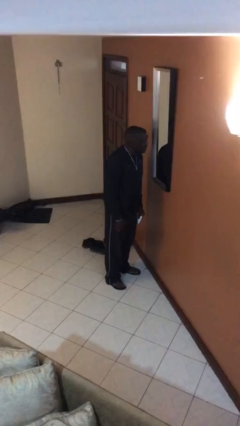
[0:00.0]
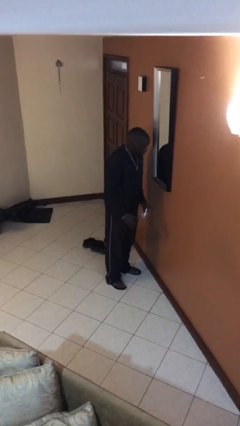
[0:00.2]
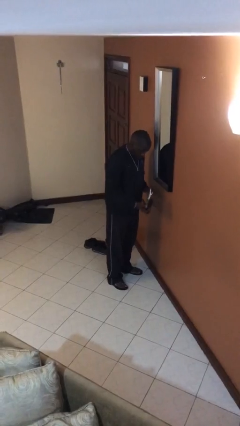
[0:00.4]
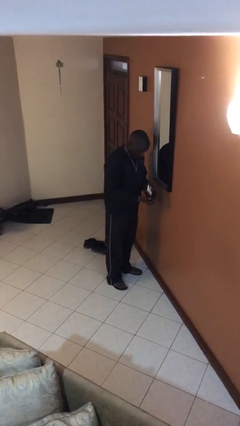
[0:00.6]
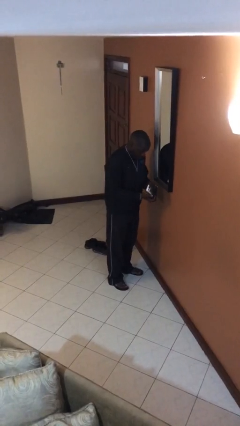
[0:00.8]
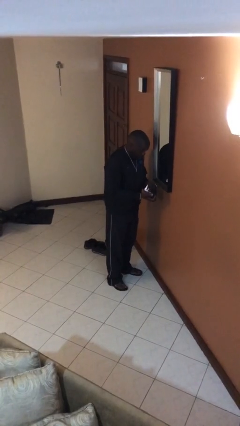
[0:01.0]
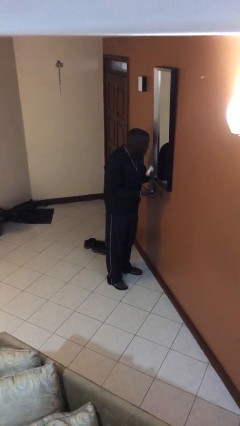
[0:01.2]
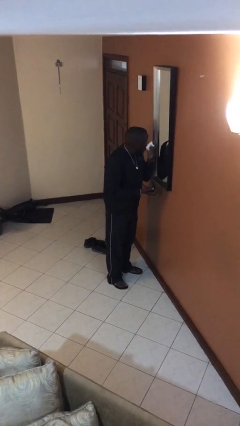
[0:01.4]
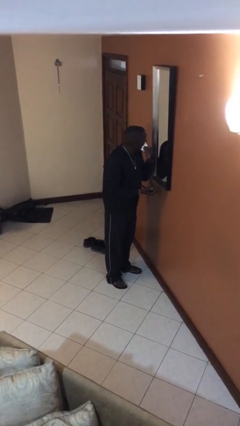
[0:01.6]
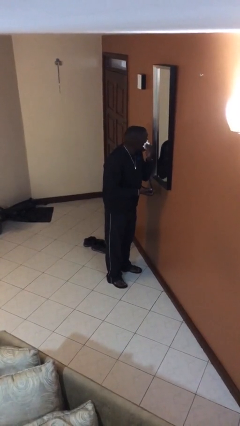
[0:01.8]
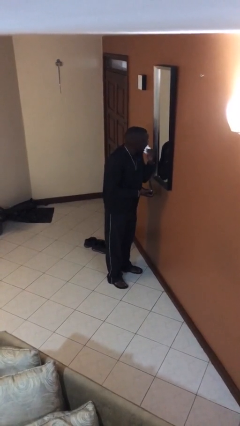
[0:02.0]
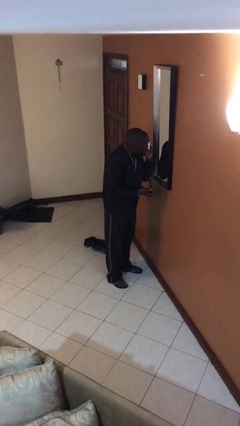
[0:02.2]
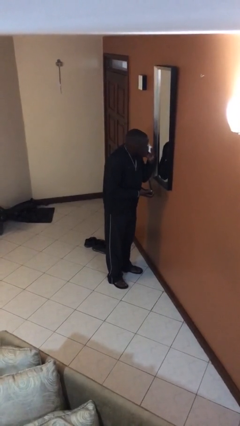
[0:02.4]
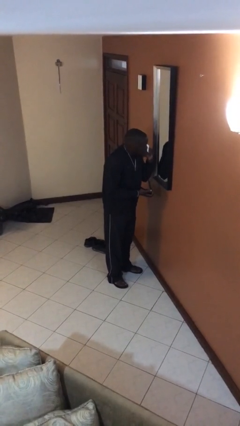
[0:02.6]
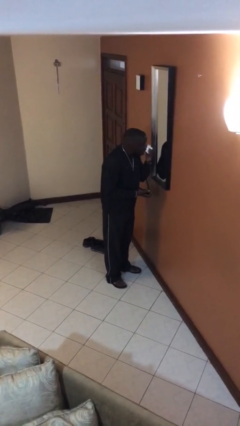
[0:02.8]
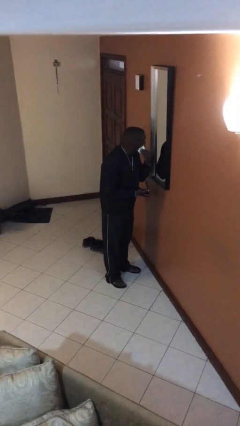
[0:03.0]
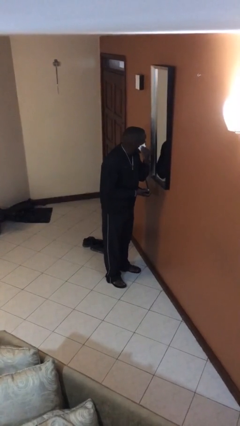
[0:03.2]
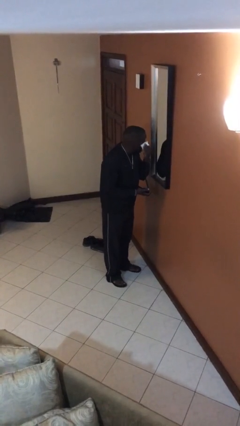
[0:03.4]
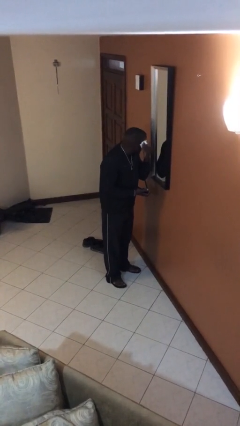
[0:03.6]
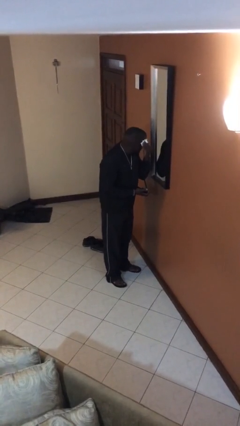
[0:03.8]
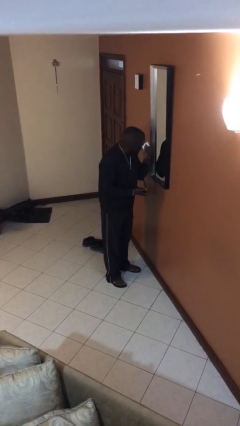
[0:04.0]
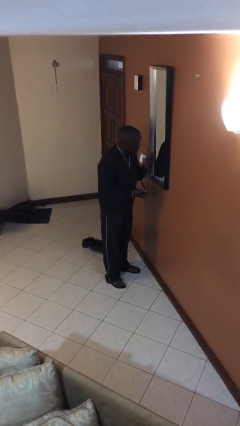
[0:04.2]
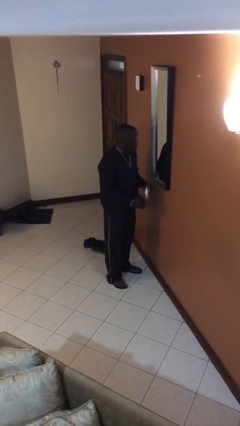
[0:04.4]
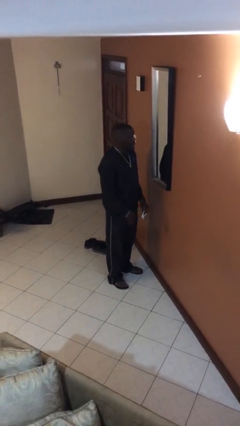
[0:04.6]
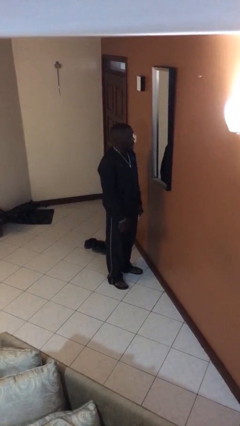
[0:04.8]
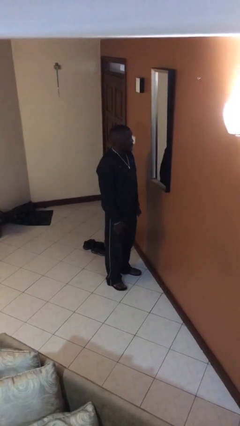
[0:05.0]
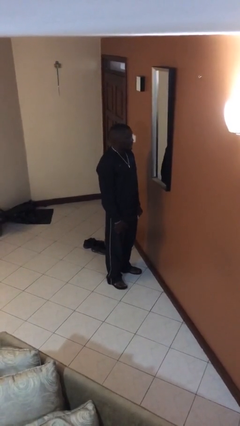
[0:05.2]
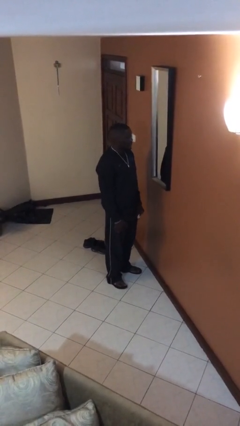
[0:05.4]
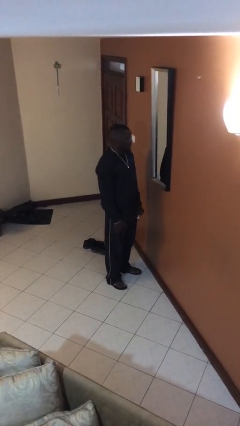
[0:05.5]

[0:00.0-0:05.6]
person applies foundation makeup

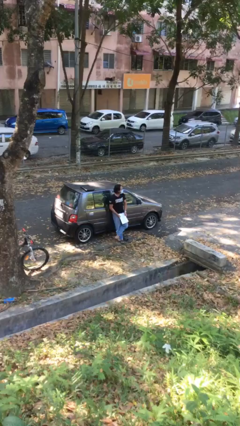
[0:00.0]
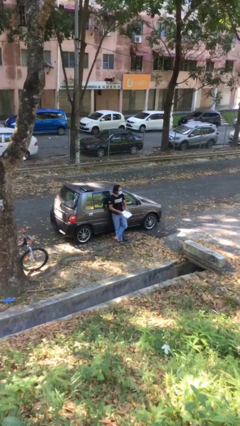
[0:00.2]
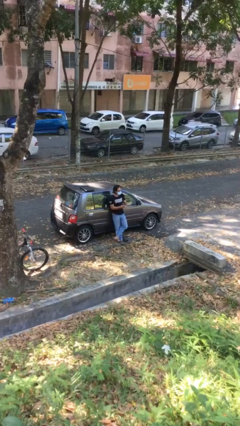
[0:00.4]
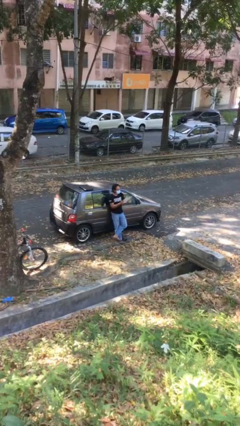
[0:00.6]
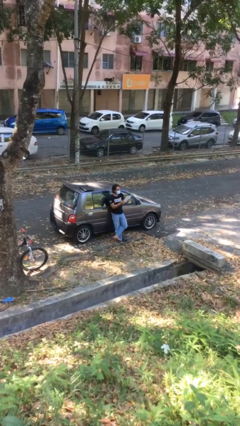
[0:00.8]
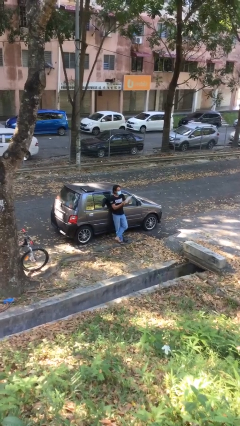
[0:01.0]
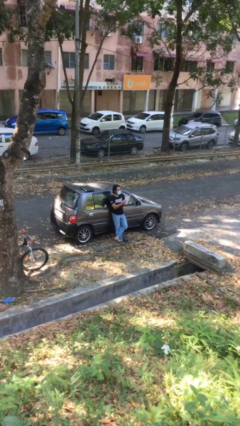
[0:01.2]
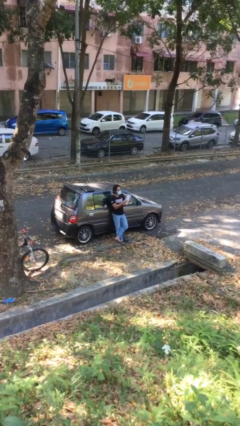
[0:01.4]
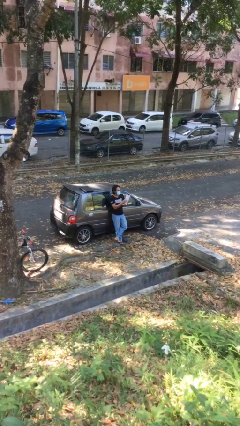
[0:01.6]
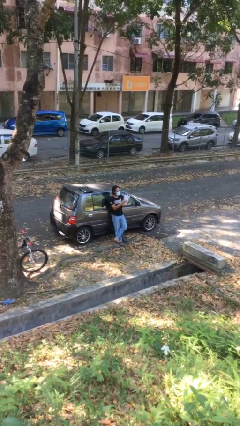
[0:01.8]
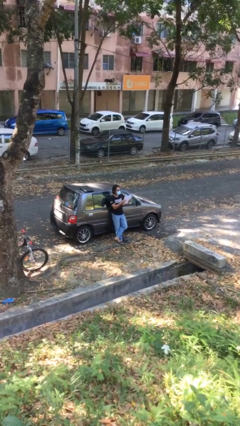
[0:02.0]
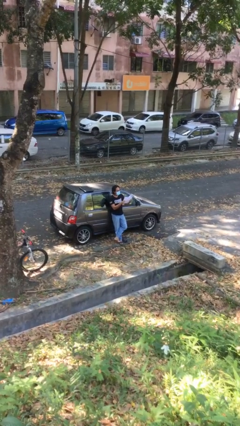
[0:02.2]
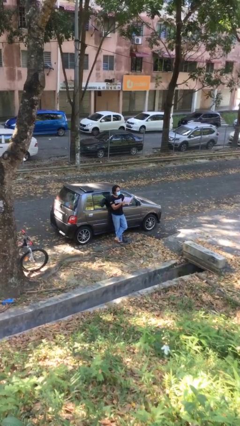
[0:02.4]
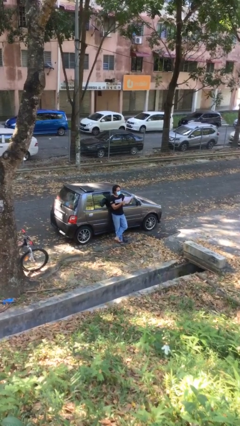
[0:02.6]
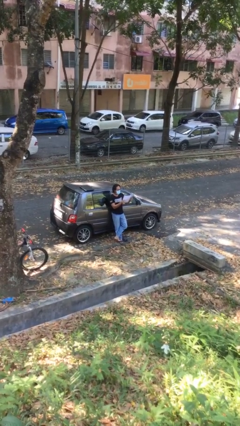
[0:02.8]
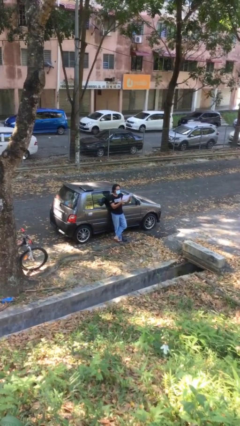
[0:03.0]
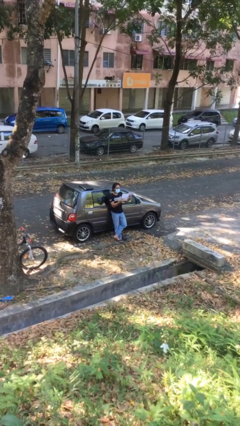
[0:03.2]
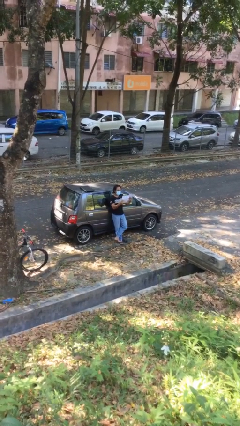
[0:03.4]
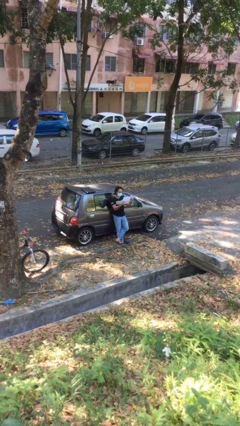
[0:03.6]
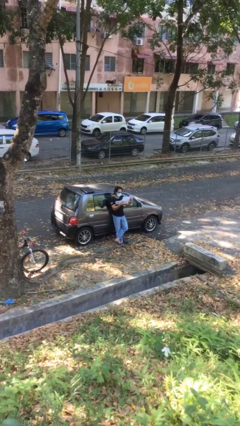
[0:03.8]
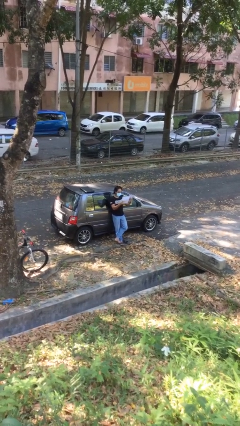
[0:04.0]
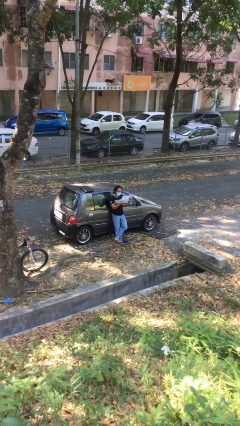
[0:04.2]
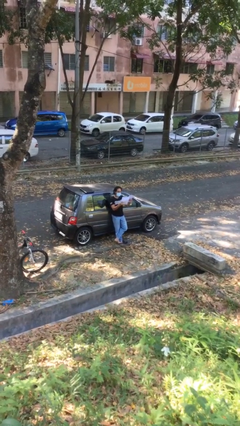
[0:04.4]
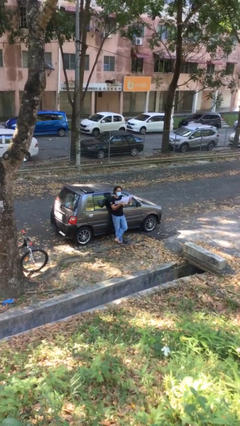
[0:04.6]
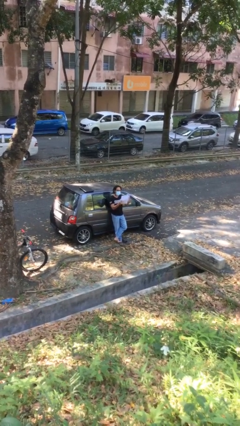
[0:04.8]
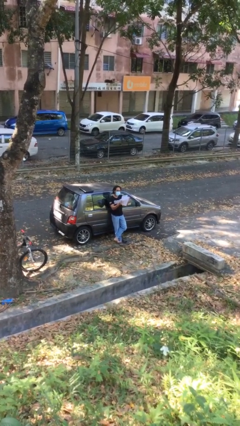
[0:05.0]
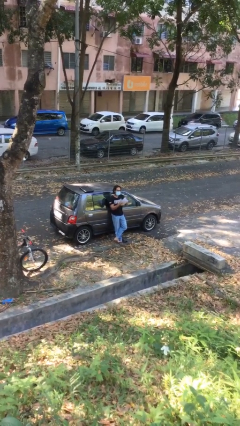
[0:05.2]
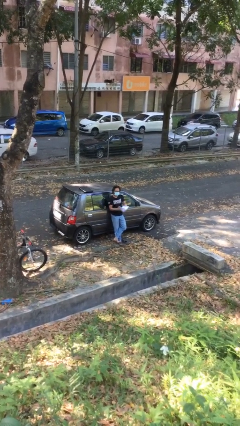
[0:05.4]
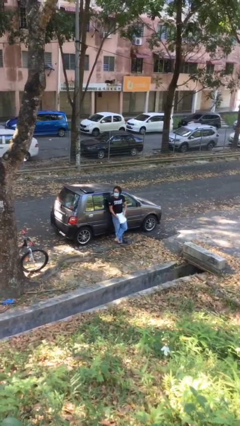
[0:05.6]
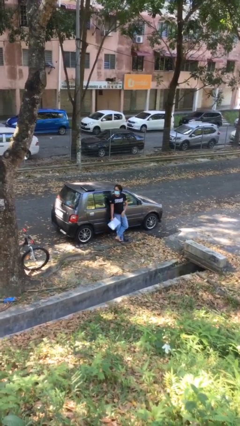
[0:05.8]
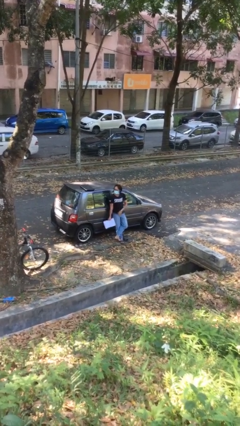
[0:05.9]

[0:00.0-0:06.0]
person reads document

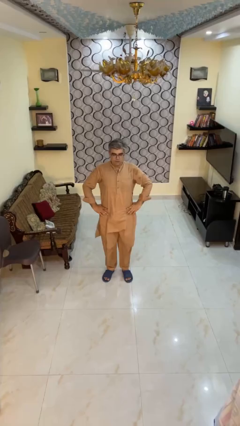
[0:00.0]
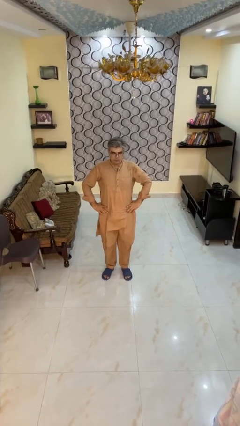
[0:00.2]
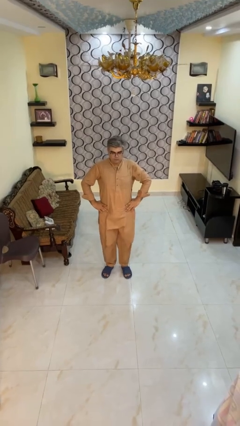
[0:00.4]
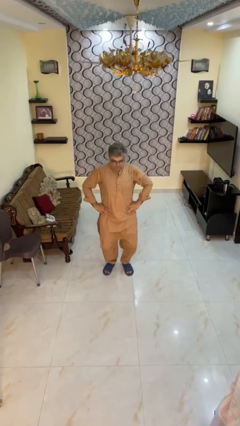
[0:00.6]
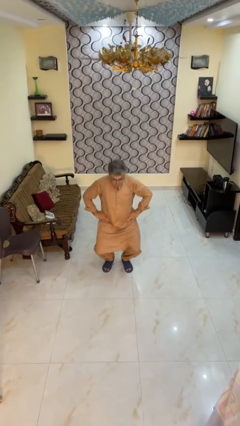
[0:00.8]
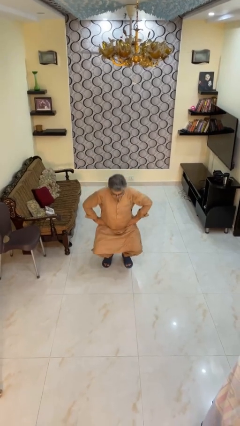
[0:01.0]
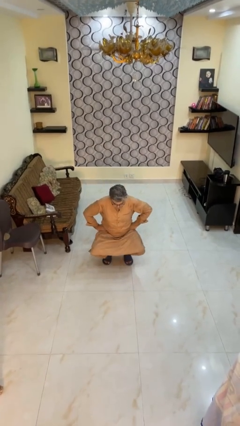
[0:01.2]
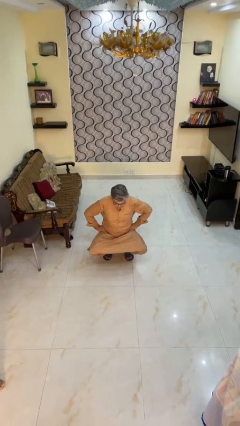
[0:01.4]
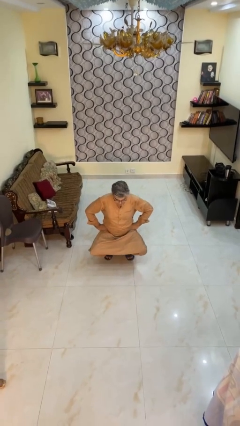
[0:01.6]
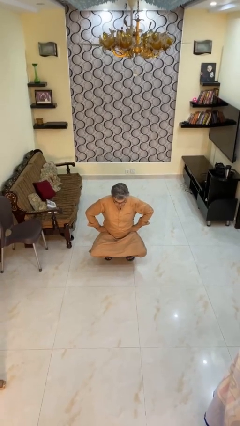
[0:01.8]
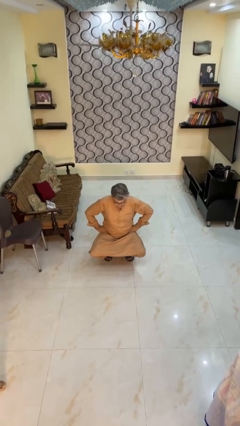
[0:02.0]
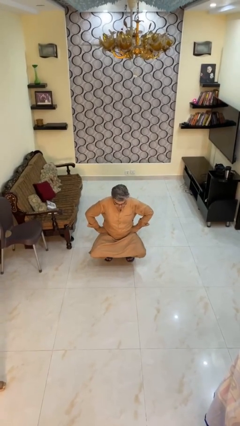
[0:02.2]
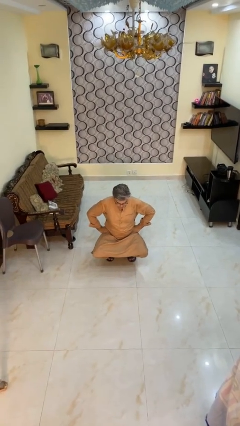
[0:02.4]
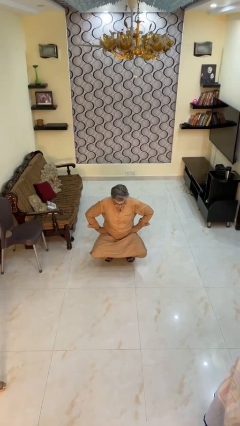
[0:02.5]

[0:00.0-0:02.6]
person squats

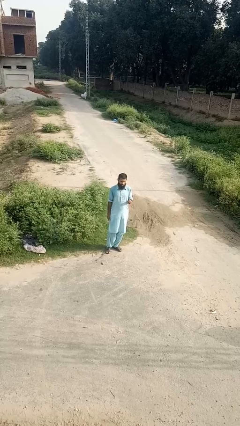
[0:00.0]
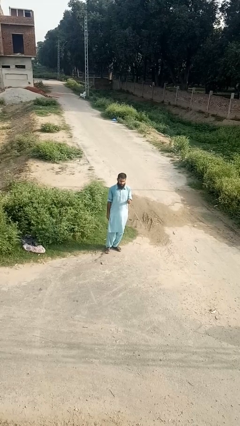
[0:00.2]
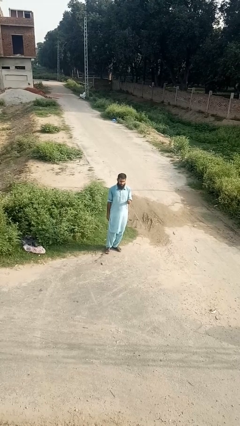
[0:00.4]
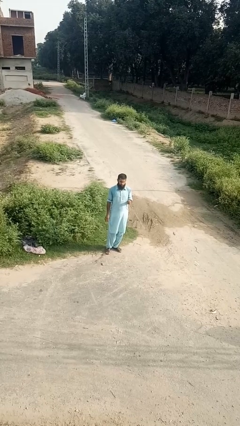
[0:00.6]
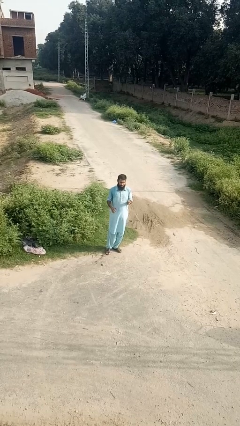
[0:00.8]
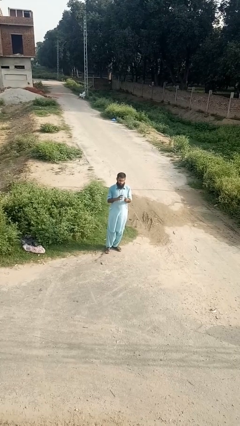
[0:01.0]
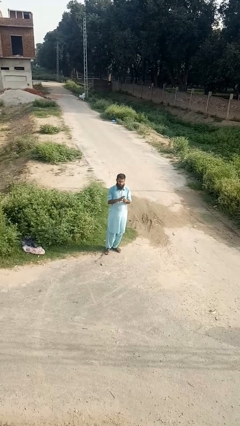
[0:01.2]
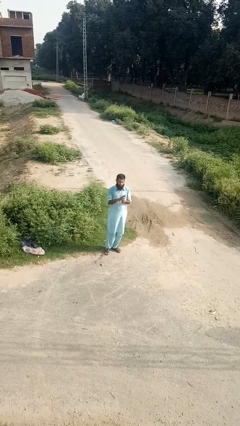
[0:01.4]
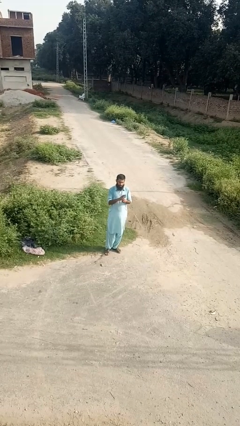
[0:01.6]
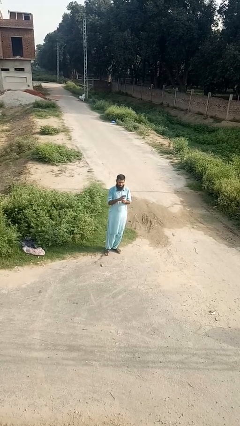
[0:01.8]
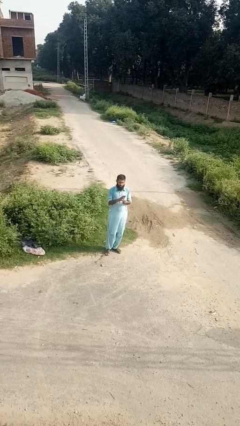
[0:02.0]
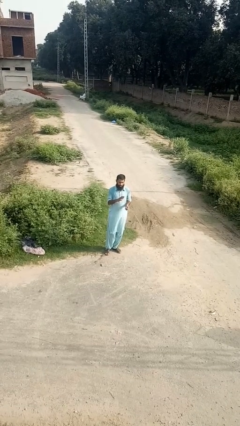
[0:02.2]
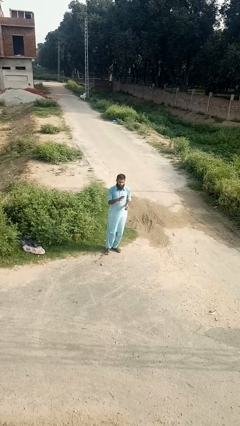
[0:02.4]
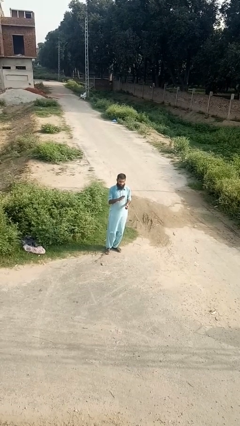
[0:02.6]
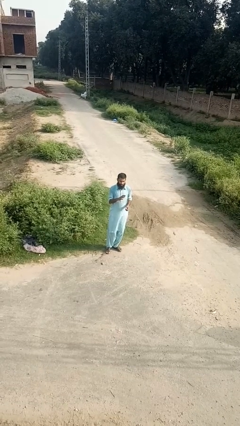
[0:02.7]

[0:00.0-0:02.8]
person puts on ring

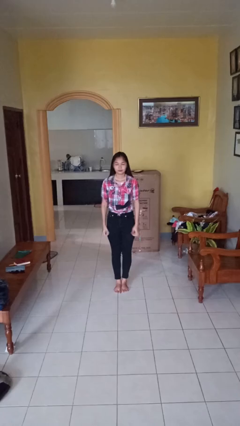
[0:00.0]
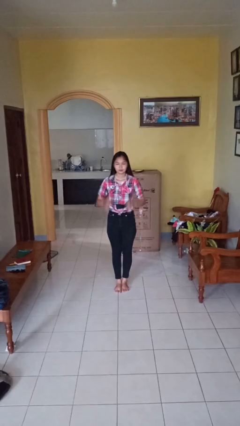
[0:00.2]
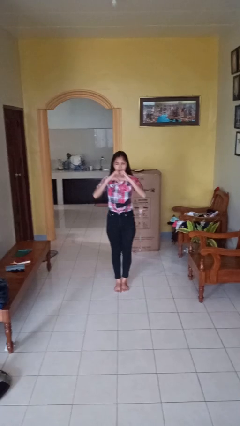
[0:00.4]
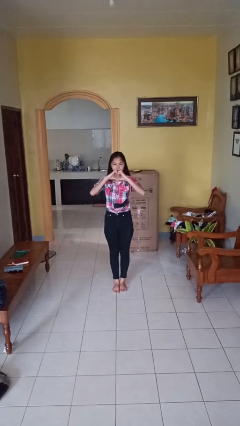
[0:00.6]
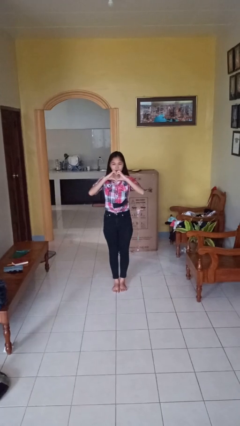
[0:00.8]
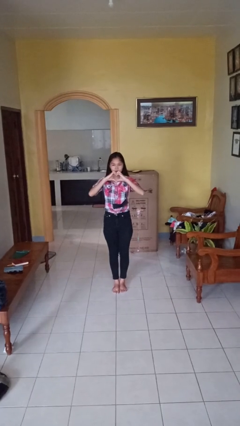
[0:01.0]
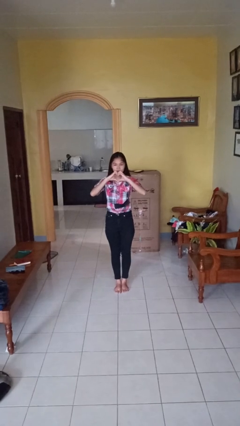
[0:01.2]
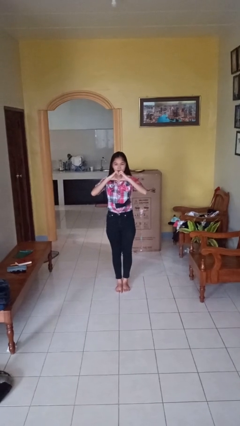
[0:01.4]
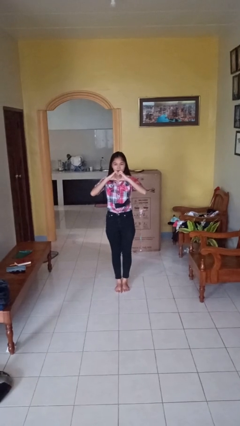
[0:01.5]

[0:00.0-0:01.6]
person gestures heart
